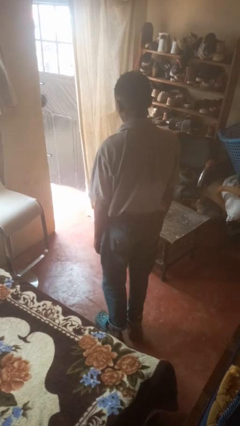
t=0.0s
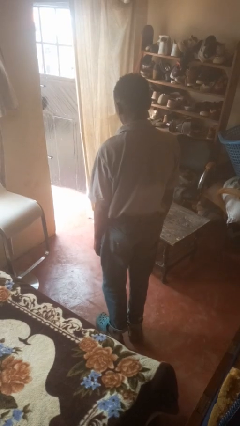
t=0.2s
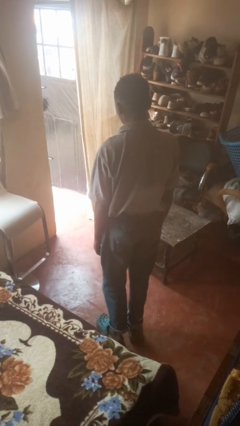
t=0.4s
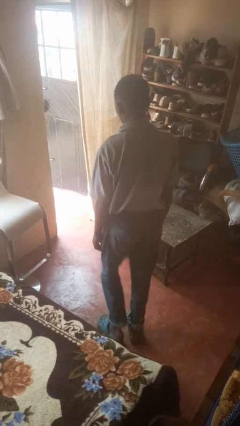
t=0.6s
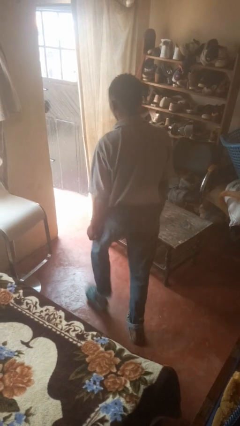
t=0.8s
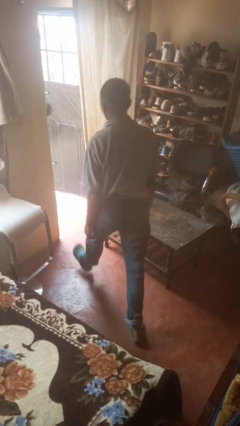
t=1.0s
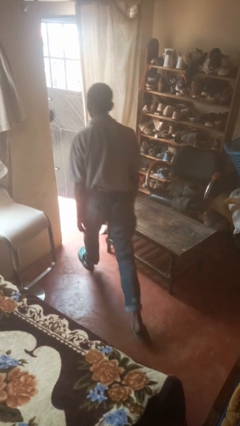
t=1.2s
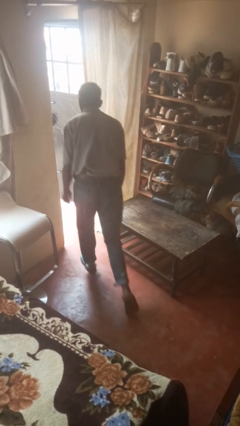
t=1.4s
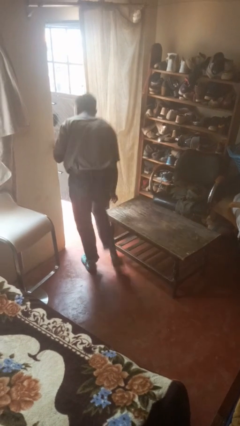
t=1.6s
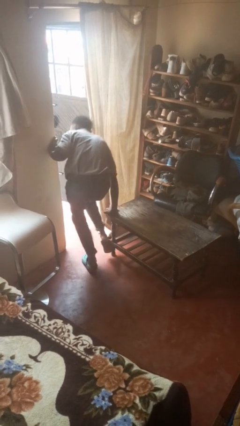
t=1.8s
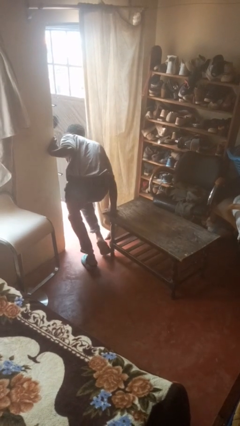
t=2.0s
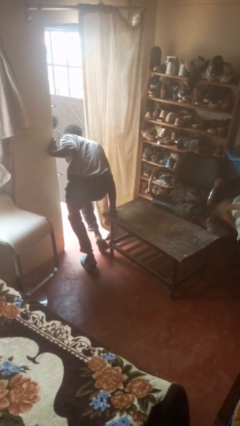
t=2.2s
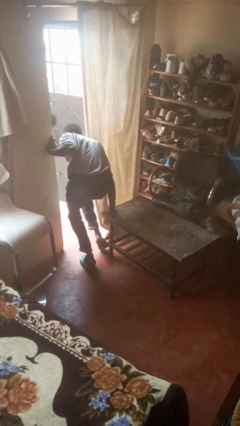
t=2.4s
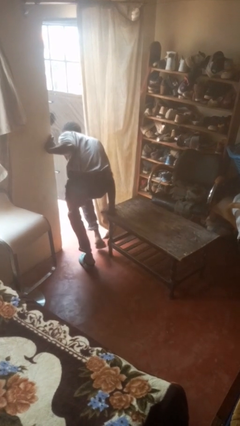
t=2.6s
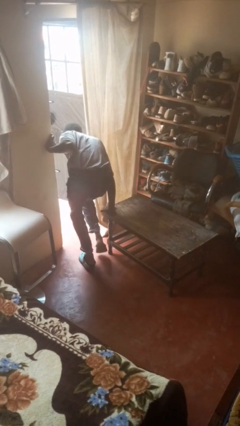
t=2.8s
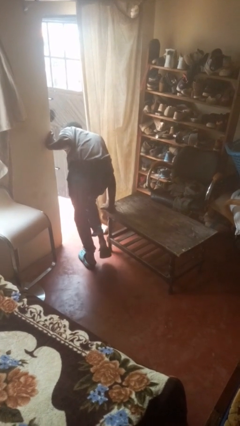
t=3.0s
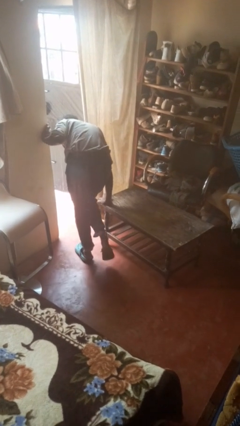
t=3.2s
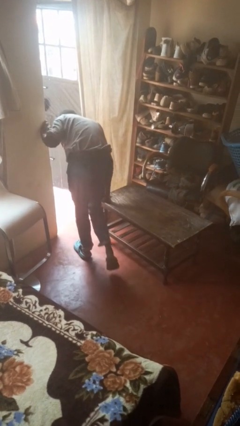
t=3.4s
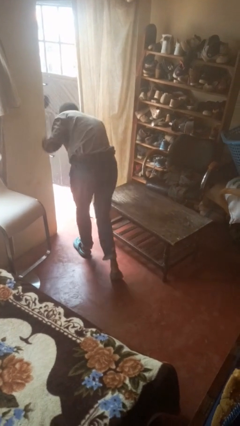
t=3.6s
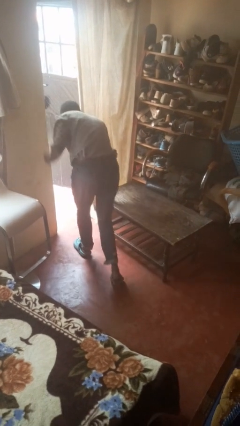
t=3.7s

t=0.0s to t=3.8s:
person bumps into table

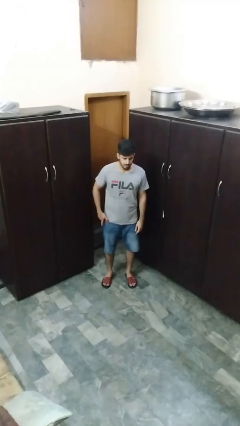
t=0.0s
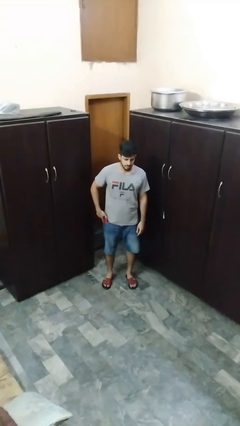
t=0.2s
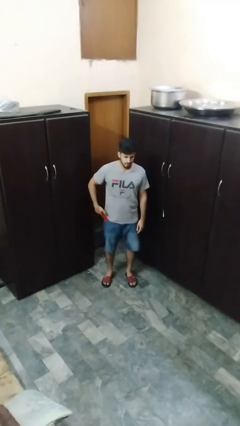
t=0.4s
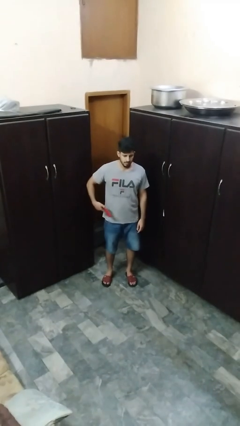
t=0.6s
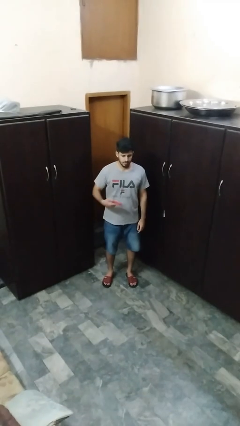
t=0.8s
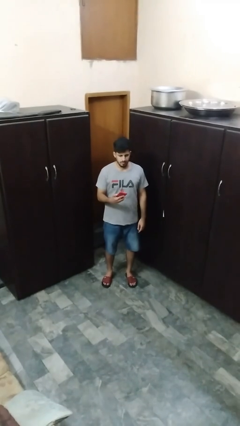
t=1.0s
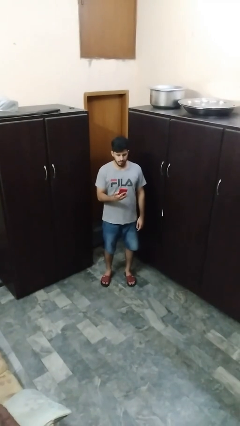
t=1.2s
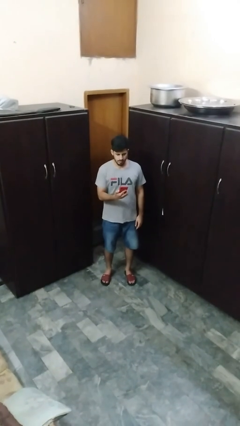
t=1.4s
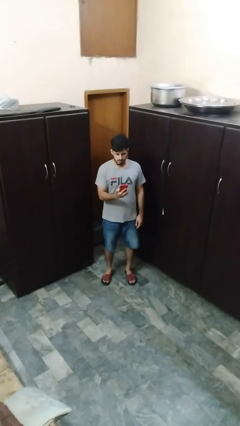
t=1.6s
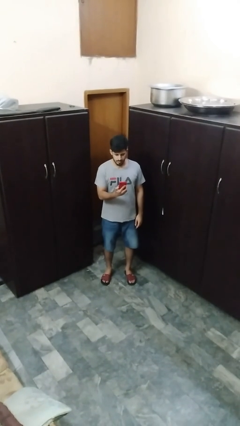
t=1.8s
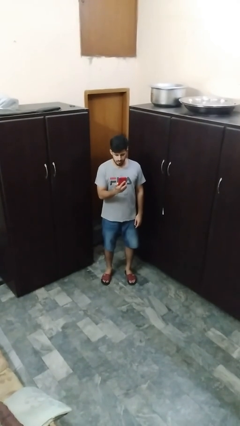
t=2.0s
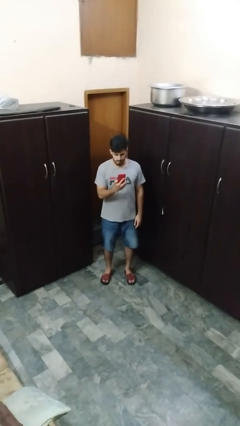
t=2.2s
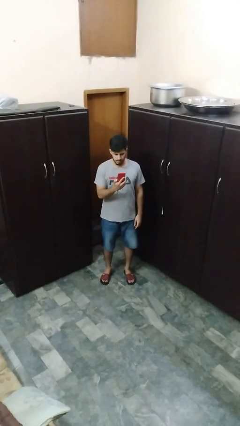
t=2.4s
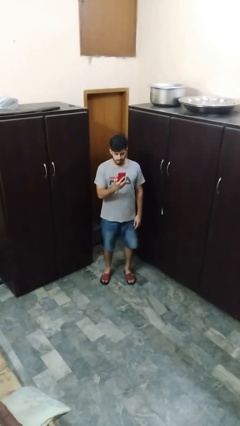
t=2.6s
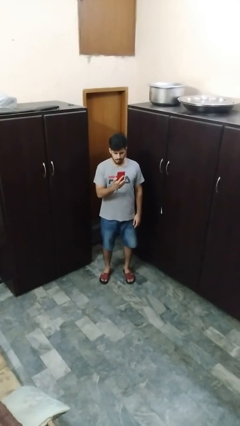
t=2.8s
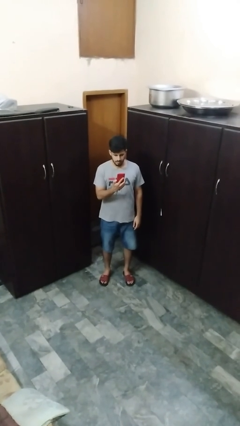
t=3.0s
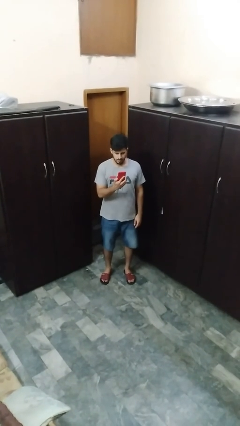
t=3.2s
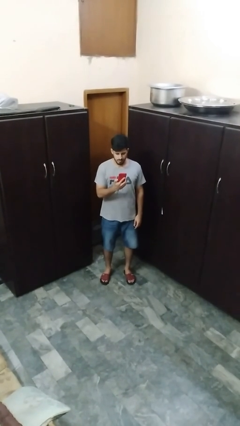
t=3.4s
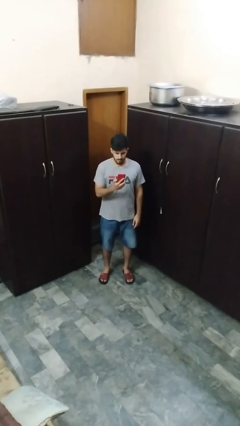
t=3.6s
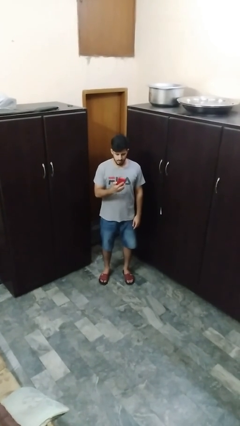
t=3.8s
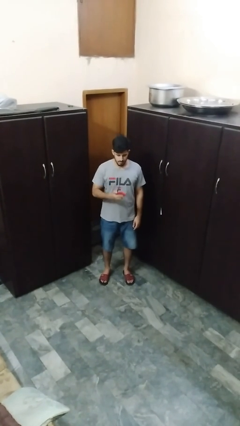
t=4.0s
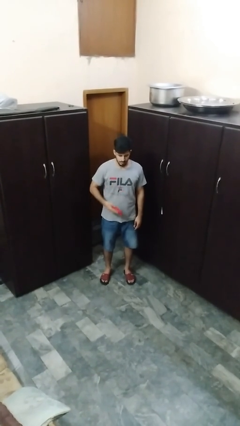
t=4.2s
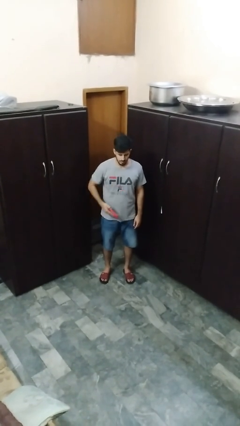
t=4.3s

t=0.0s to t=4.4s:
person takes phone from pocket

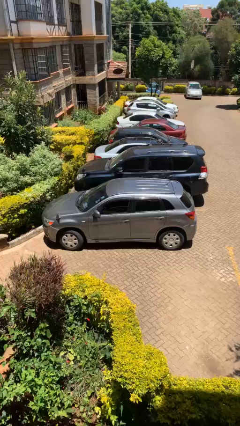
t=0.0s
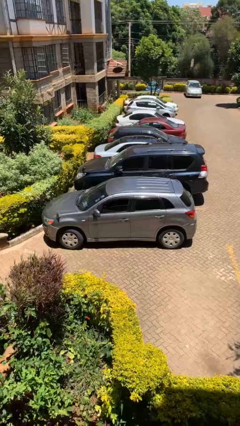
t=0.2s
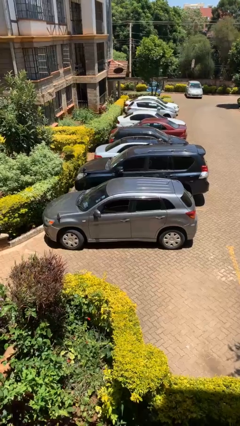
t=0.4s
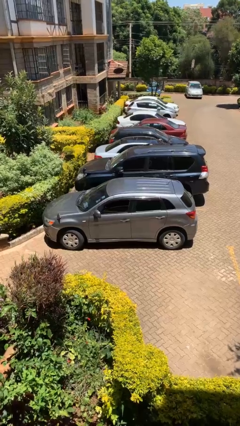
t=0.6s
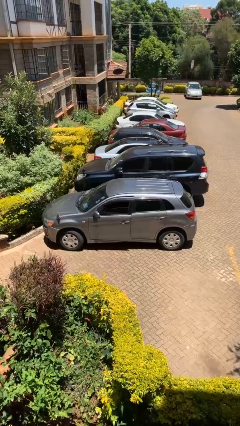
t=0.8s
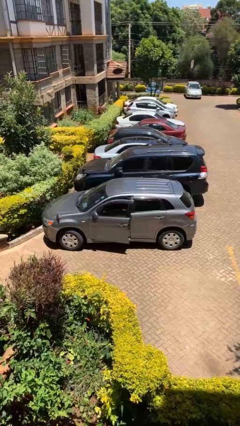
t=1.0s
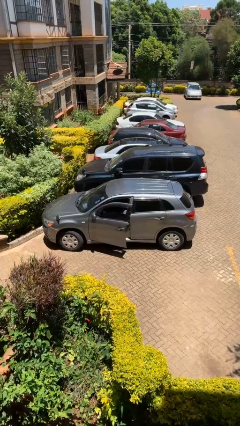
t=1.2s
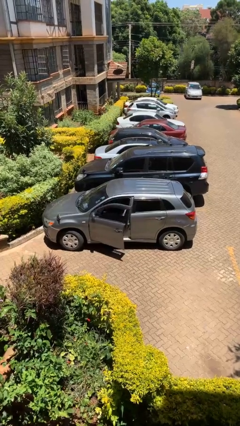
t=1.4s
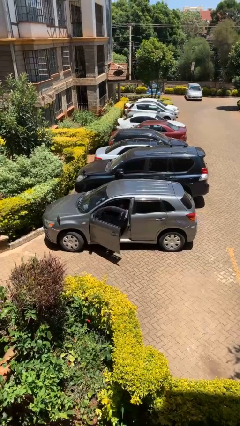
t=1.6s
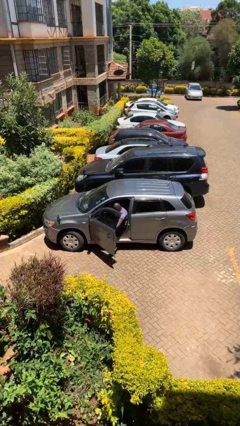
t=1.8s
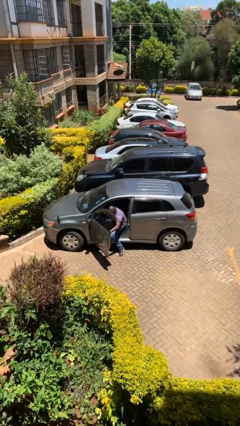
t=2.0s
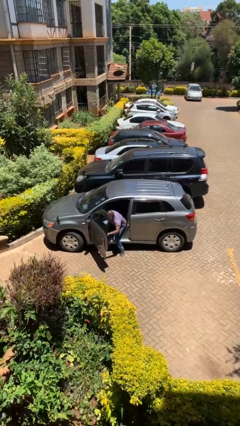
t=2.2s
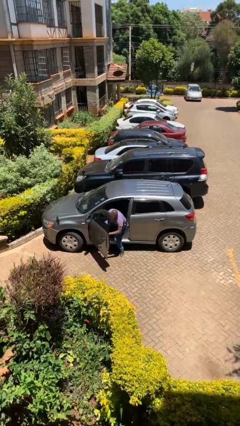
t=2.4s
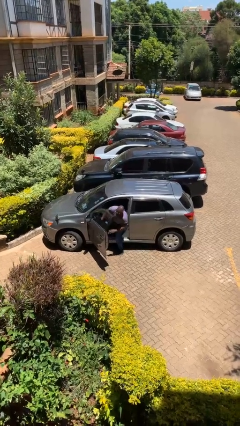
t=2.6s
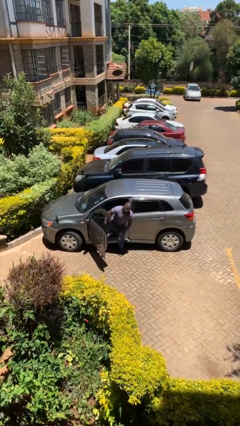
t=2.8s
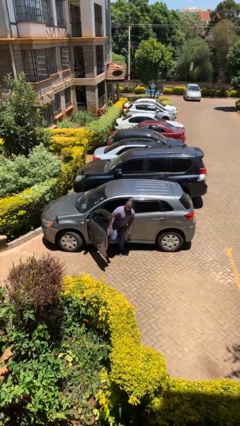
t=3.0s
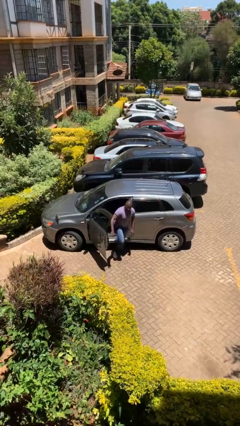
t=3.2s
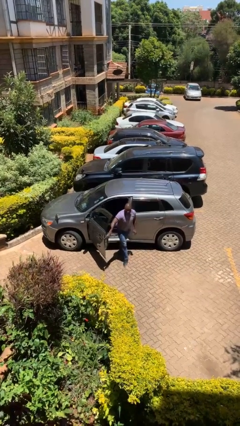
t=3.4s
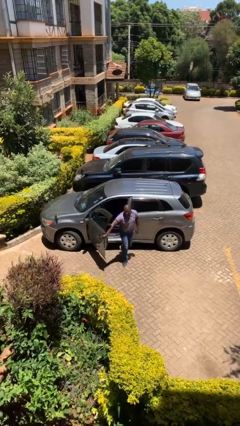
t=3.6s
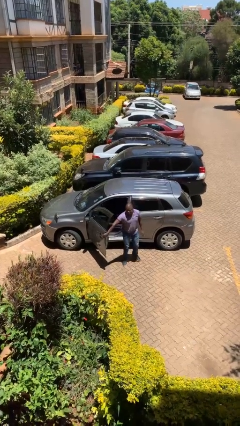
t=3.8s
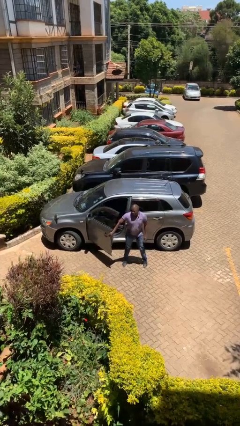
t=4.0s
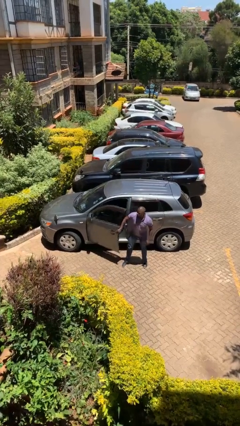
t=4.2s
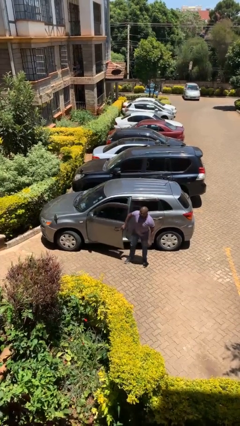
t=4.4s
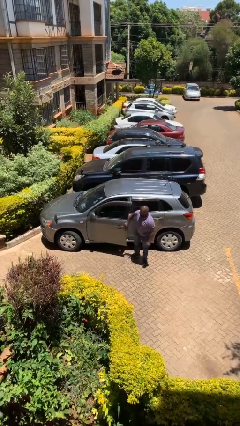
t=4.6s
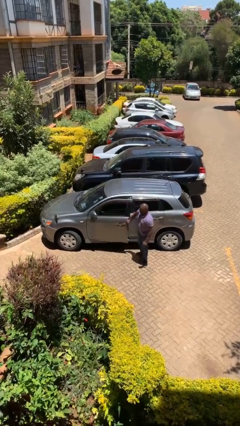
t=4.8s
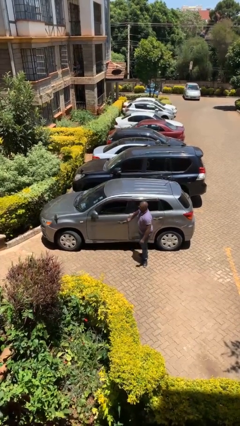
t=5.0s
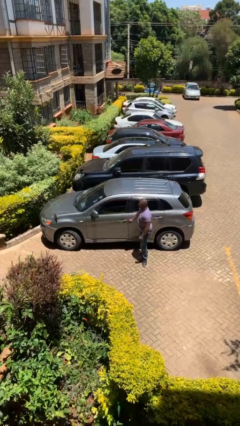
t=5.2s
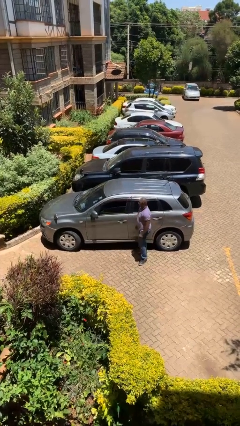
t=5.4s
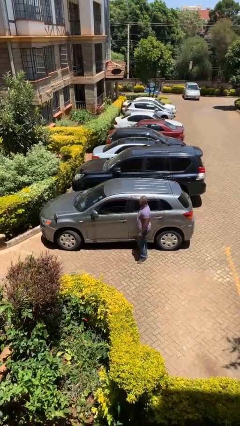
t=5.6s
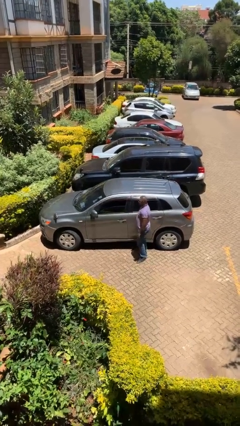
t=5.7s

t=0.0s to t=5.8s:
car drops off person

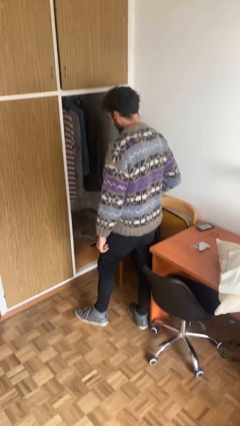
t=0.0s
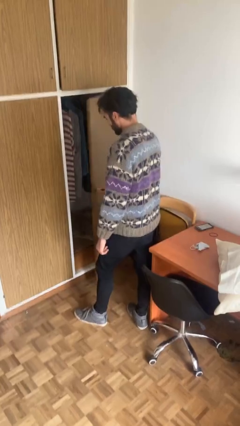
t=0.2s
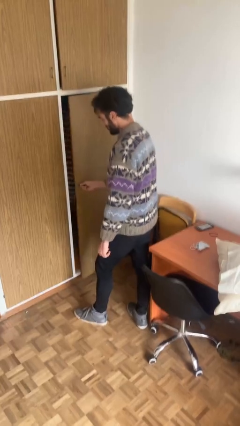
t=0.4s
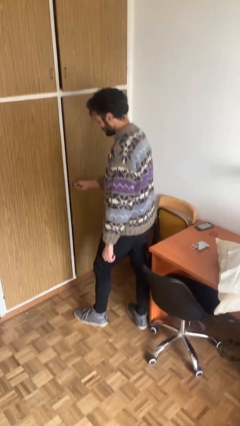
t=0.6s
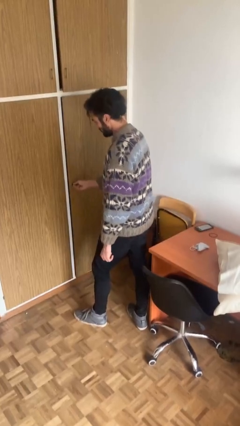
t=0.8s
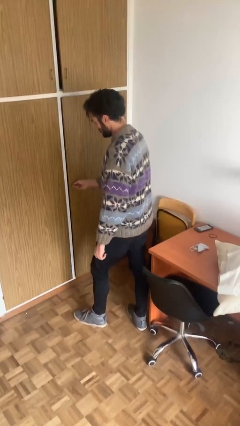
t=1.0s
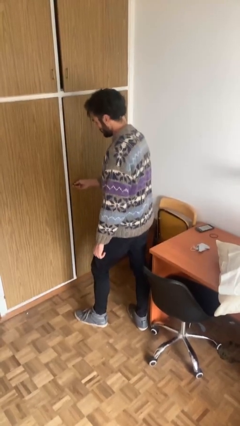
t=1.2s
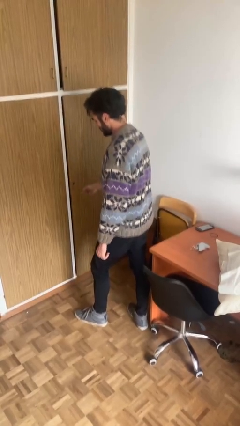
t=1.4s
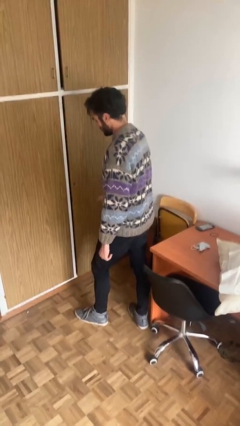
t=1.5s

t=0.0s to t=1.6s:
person closes closet door

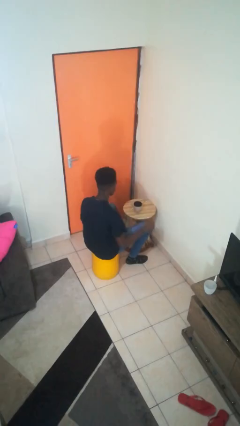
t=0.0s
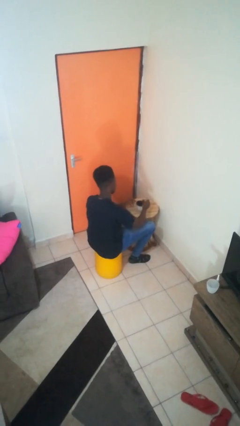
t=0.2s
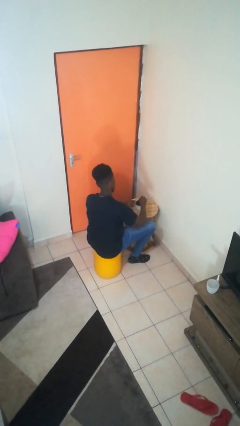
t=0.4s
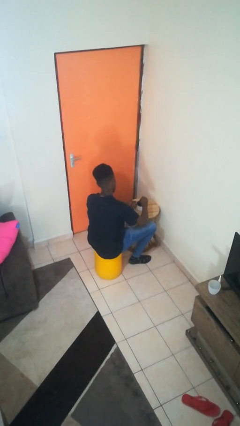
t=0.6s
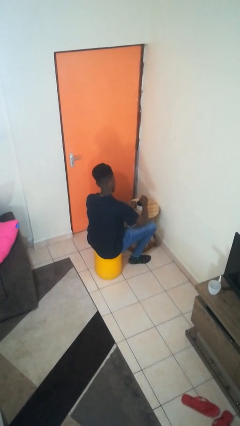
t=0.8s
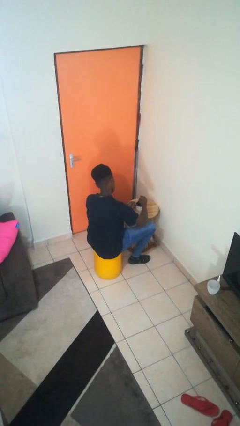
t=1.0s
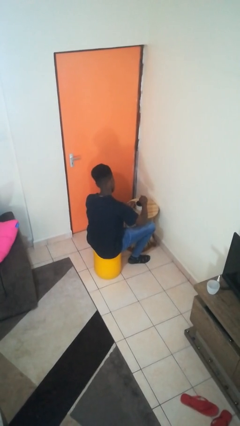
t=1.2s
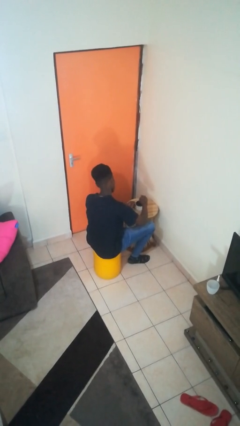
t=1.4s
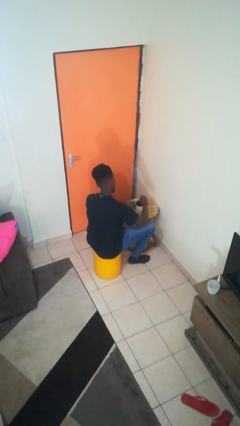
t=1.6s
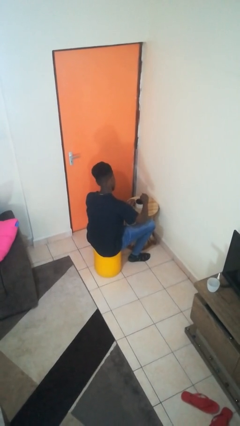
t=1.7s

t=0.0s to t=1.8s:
person stirs mug

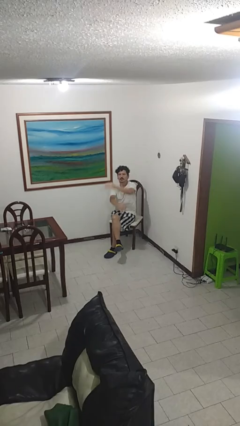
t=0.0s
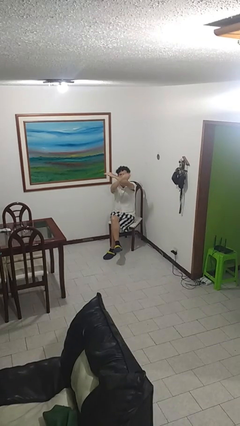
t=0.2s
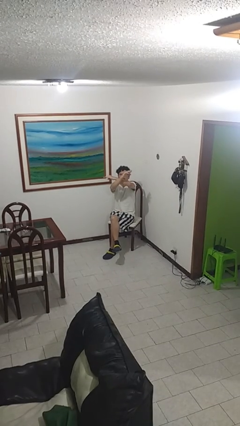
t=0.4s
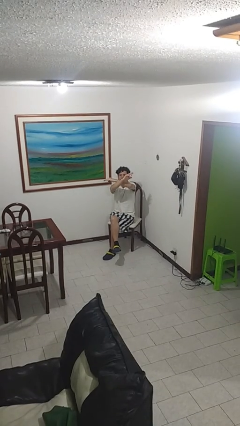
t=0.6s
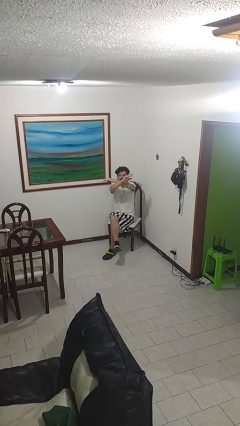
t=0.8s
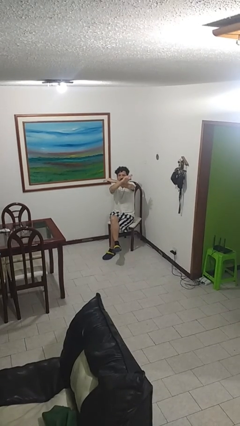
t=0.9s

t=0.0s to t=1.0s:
person gestures arms x
